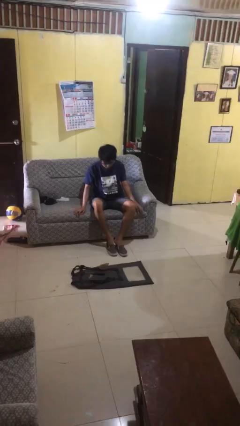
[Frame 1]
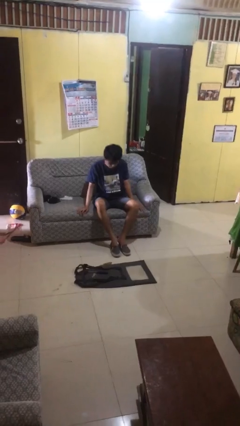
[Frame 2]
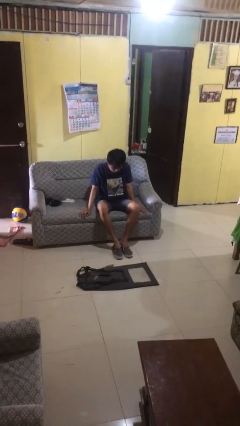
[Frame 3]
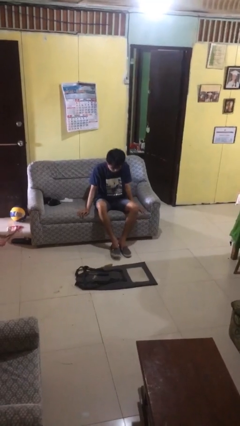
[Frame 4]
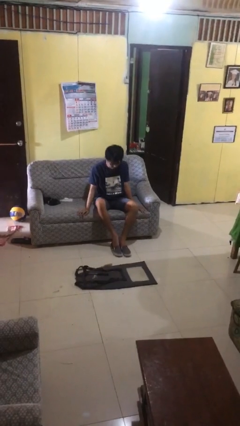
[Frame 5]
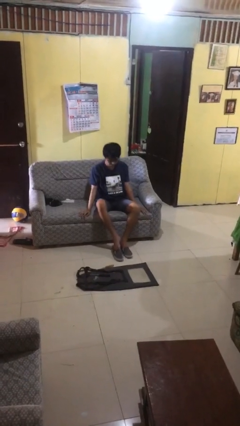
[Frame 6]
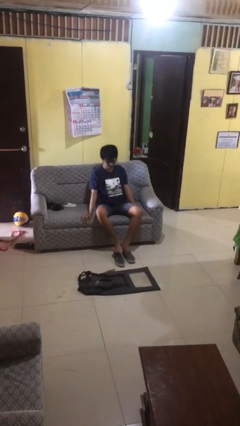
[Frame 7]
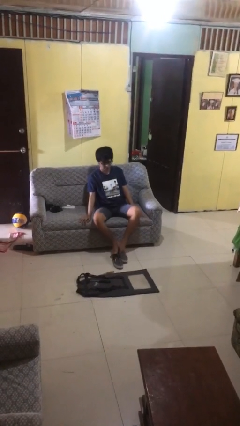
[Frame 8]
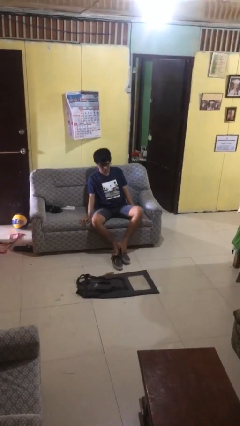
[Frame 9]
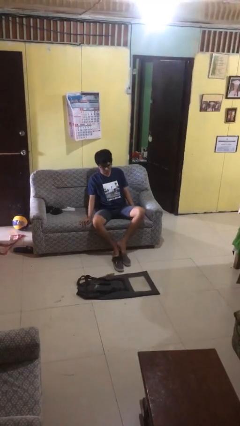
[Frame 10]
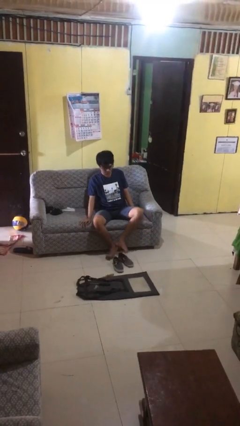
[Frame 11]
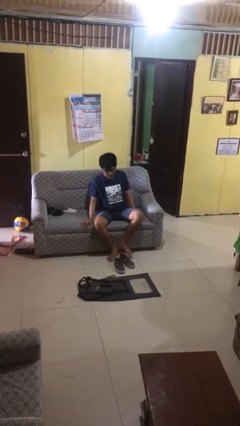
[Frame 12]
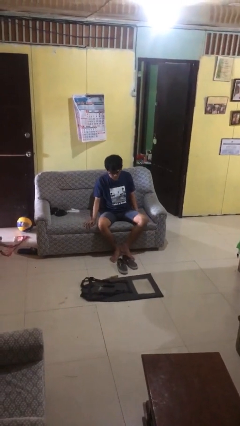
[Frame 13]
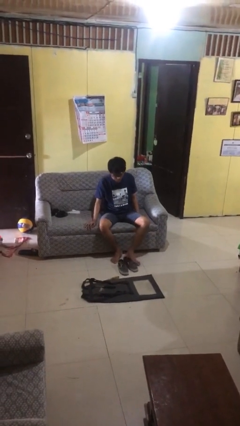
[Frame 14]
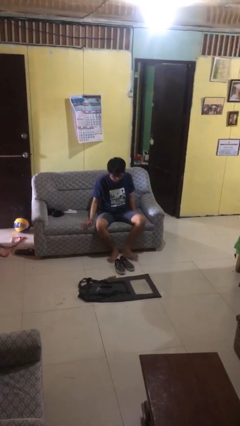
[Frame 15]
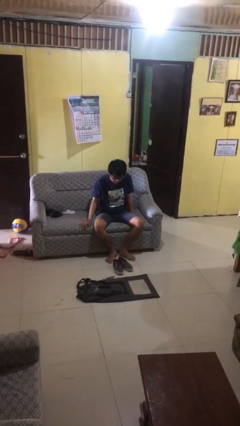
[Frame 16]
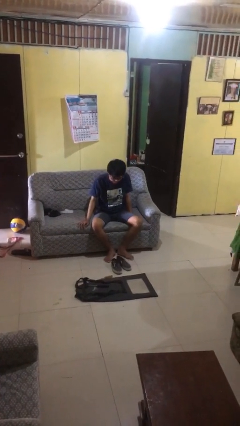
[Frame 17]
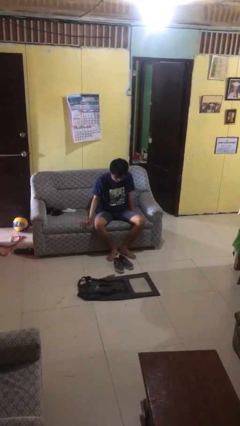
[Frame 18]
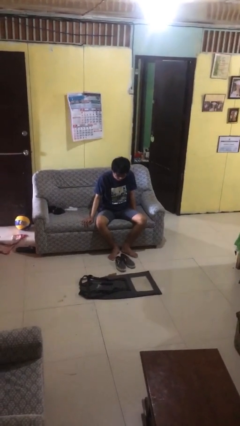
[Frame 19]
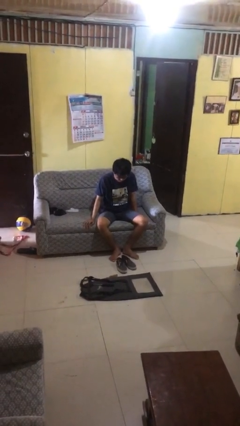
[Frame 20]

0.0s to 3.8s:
person takes off shoes

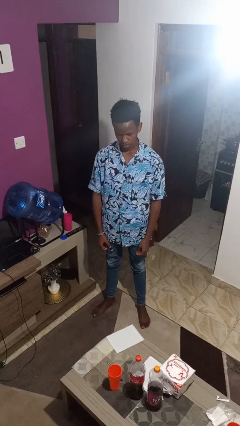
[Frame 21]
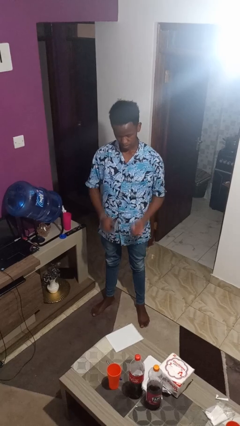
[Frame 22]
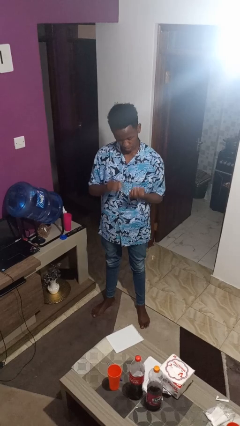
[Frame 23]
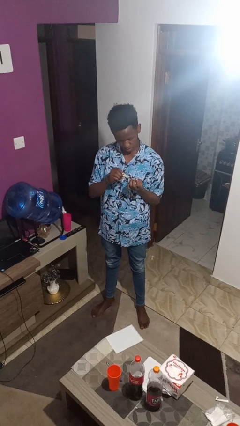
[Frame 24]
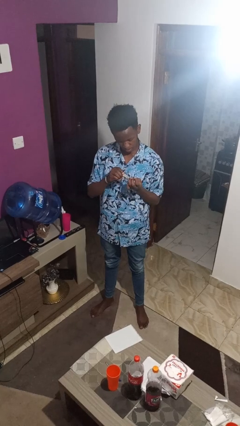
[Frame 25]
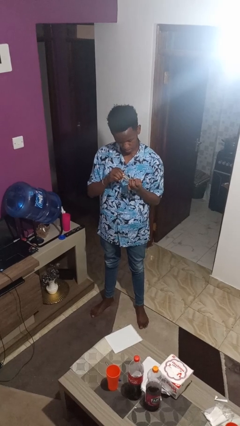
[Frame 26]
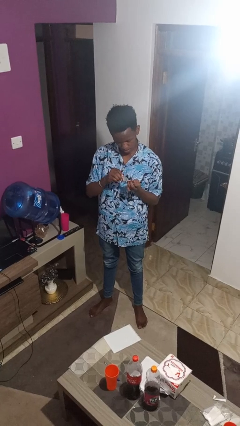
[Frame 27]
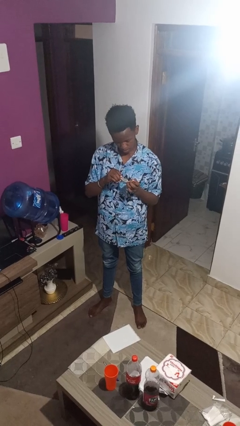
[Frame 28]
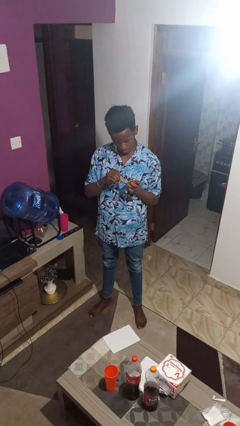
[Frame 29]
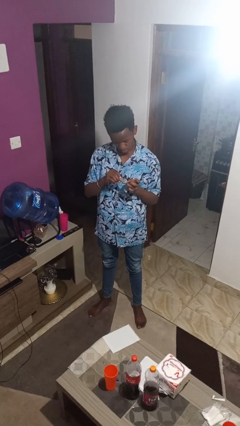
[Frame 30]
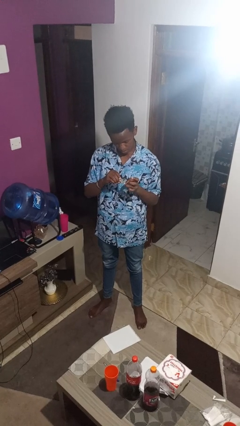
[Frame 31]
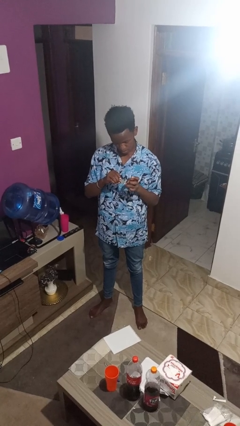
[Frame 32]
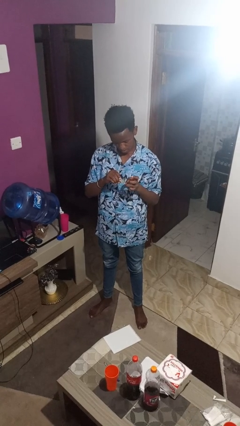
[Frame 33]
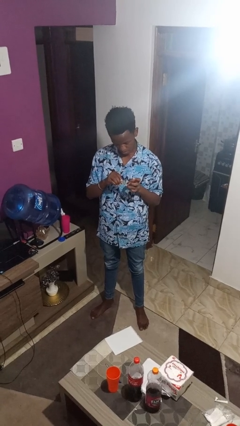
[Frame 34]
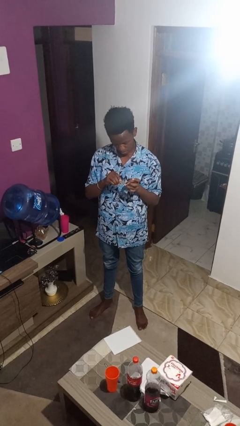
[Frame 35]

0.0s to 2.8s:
person clips fingernails

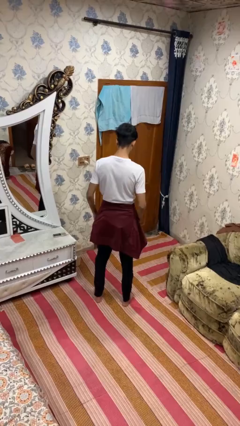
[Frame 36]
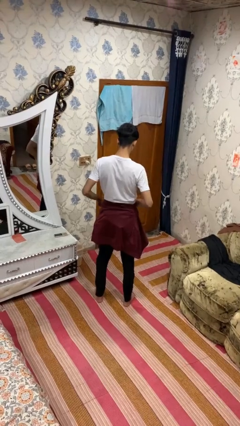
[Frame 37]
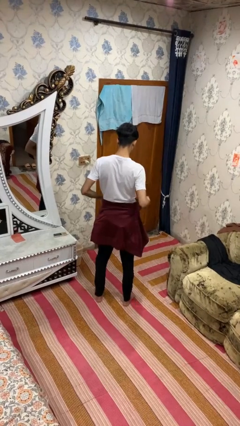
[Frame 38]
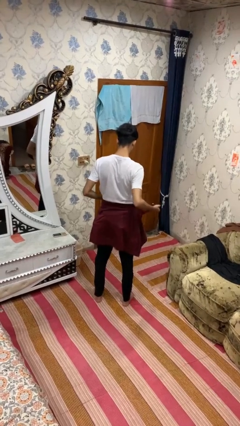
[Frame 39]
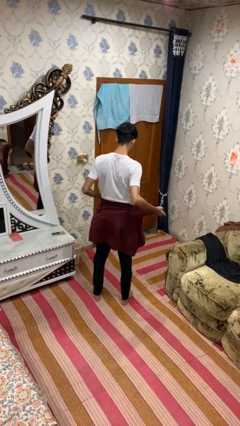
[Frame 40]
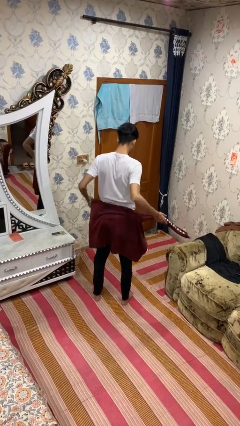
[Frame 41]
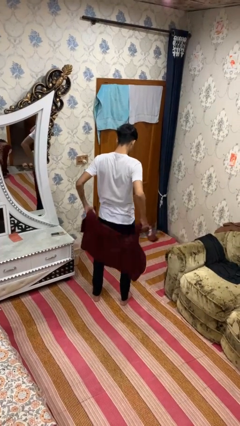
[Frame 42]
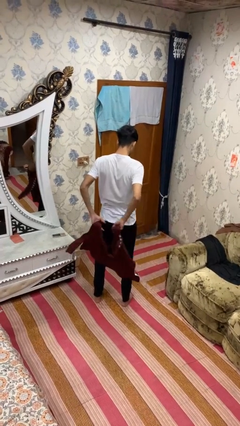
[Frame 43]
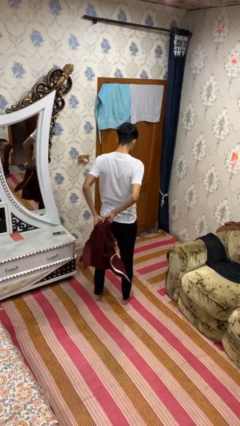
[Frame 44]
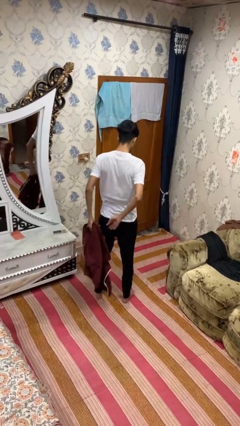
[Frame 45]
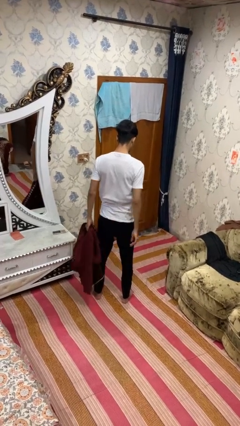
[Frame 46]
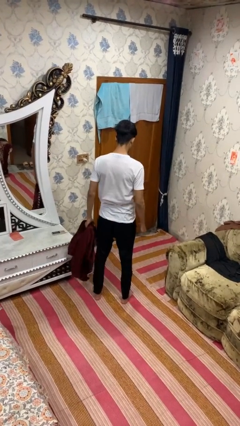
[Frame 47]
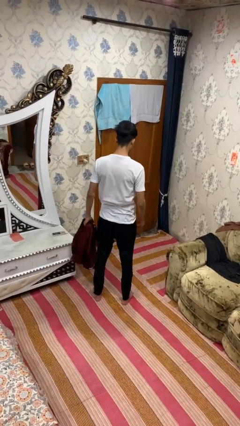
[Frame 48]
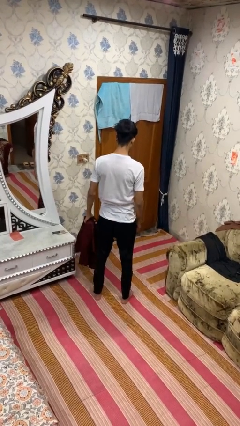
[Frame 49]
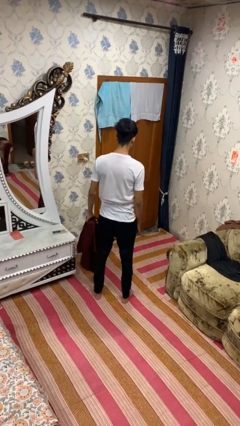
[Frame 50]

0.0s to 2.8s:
person unties jacket around waist

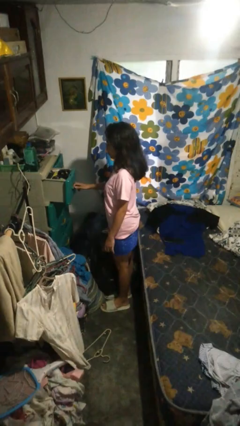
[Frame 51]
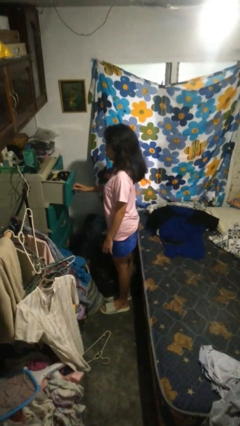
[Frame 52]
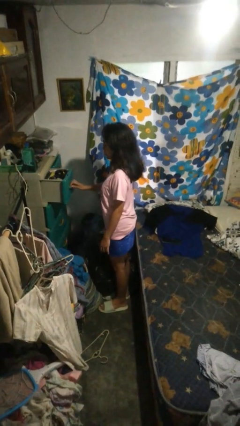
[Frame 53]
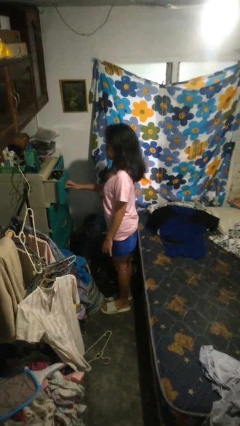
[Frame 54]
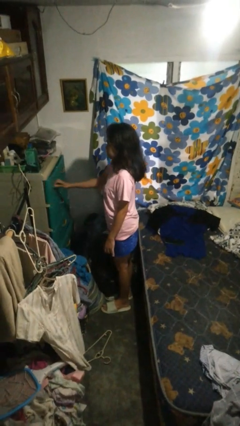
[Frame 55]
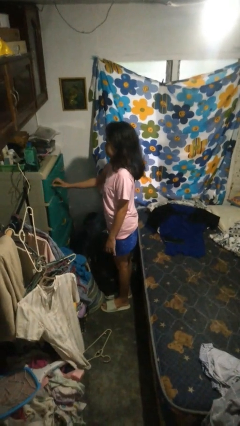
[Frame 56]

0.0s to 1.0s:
person closes dresser drawer

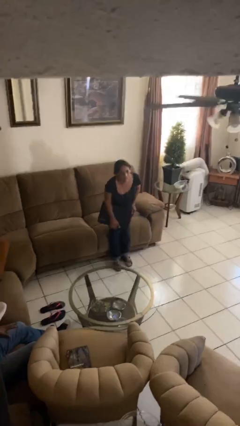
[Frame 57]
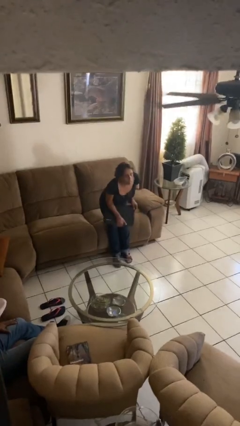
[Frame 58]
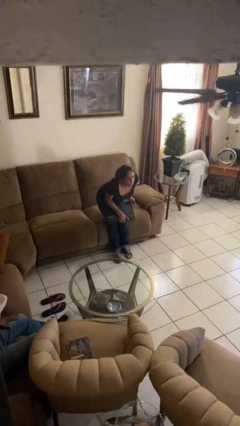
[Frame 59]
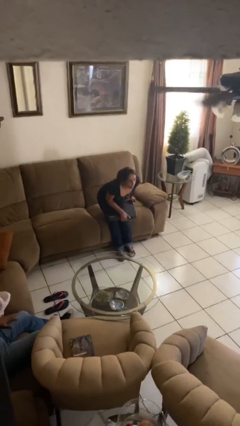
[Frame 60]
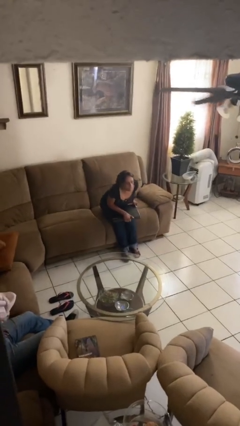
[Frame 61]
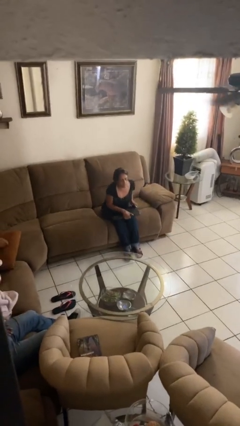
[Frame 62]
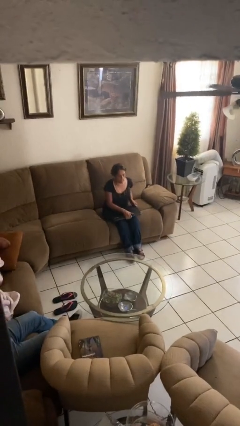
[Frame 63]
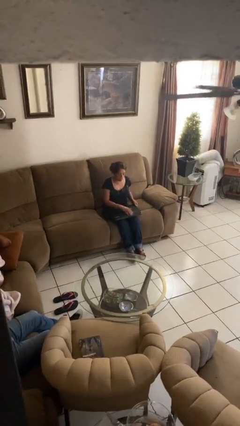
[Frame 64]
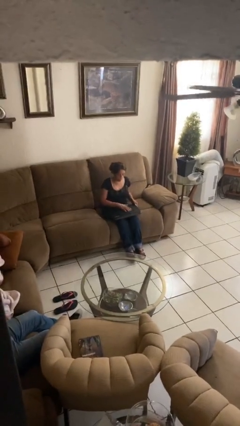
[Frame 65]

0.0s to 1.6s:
person sits down

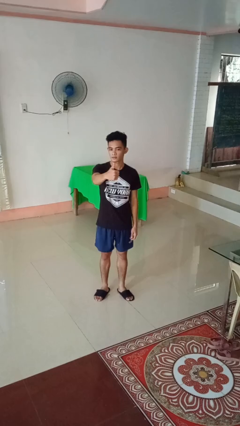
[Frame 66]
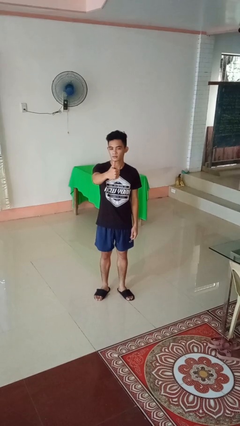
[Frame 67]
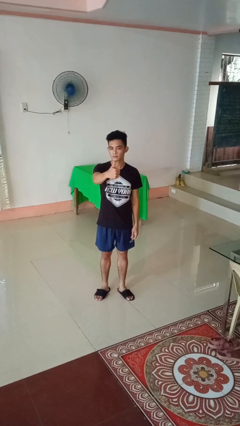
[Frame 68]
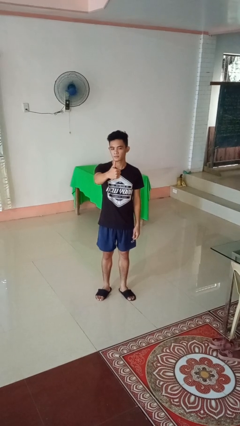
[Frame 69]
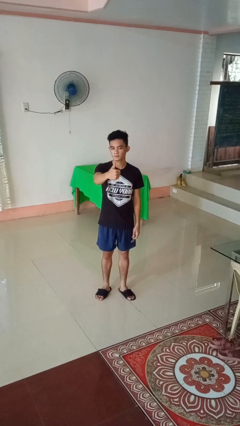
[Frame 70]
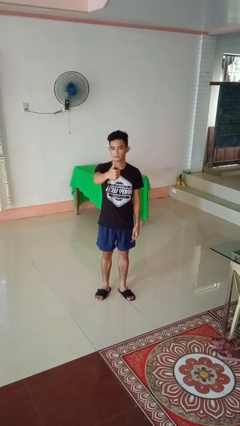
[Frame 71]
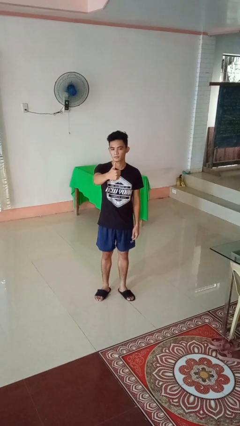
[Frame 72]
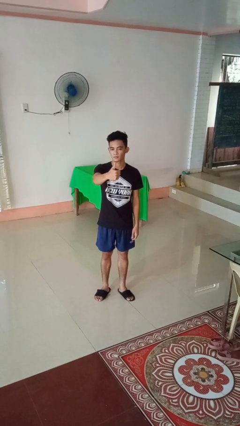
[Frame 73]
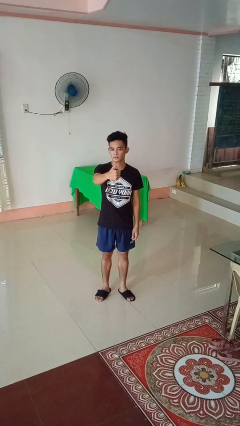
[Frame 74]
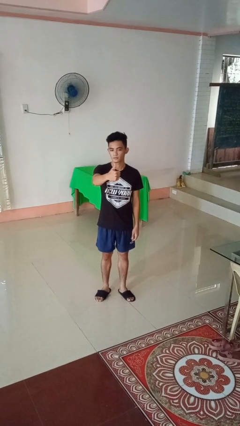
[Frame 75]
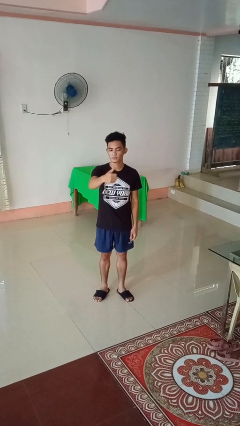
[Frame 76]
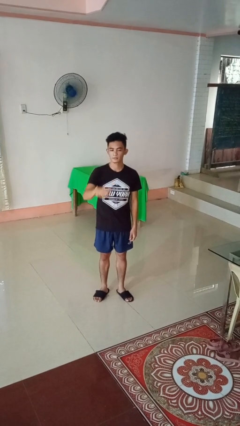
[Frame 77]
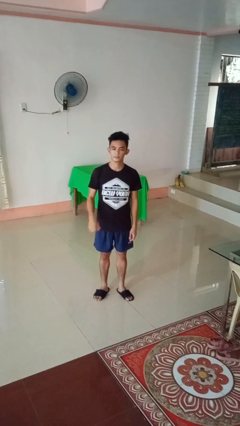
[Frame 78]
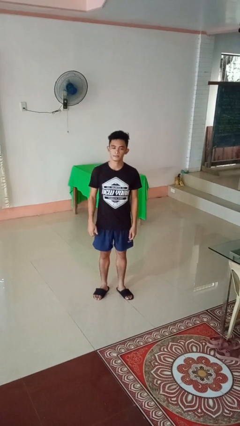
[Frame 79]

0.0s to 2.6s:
person gestures thumbs up

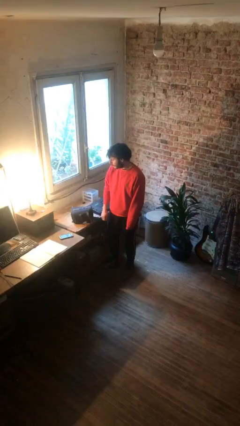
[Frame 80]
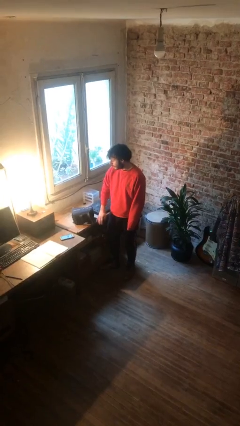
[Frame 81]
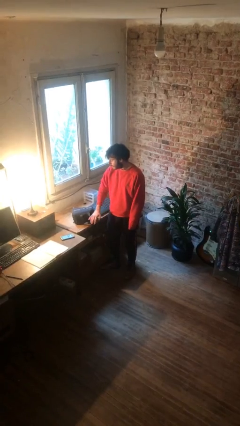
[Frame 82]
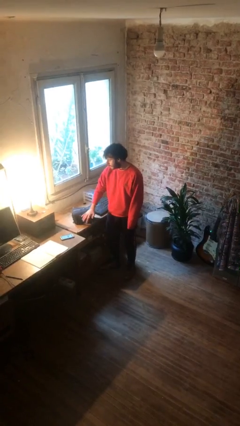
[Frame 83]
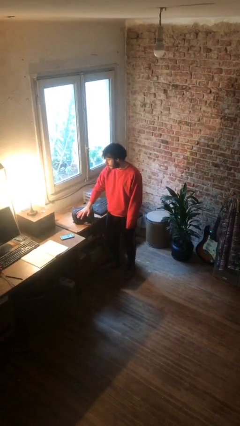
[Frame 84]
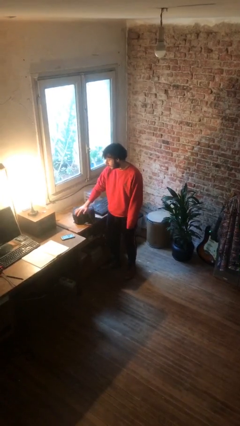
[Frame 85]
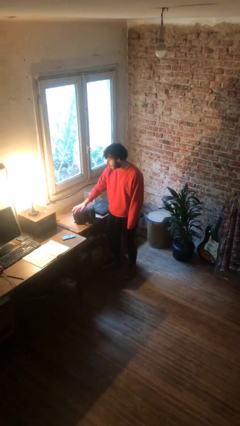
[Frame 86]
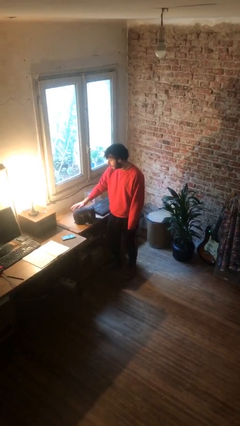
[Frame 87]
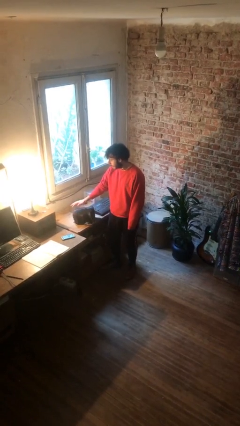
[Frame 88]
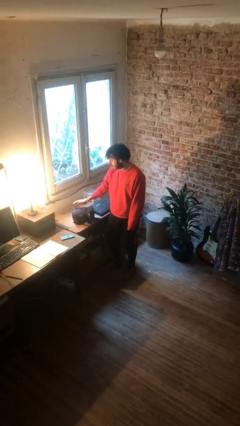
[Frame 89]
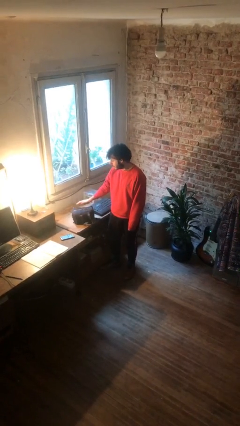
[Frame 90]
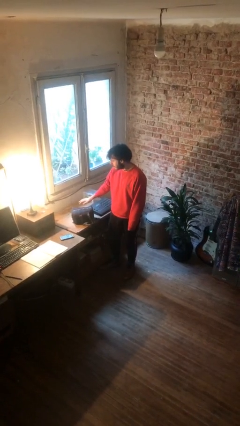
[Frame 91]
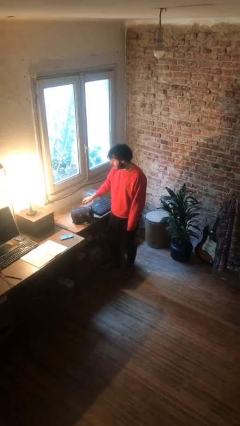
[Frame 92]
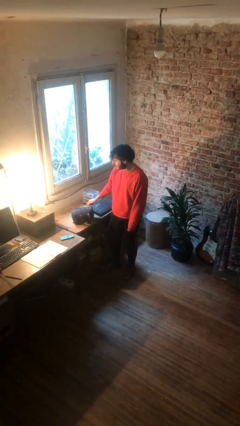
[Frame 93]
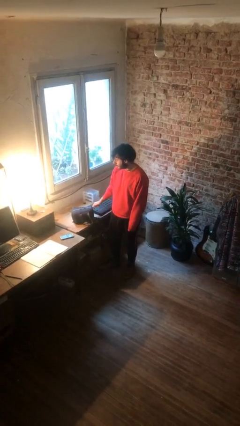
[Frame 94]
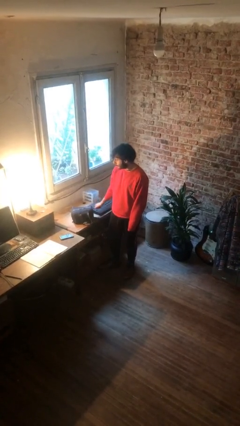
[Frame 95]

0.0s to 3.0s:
person waves hand over object
